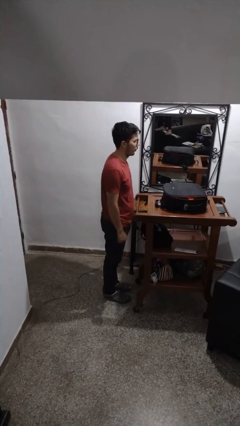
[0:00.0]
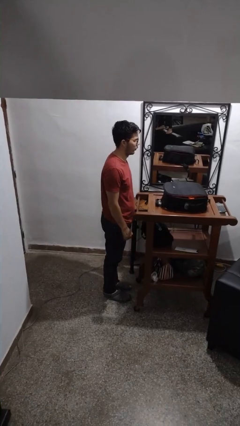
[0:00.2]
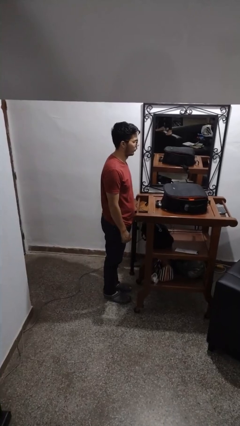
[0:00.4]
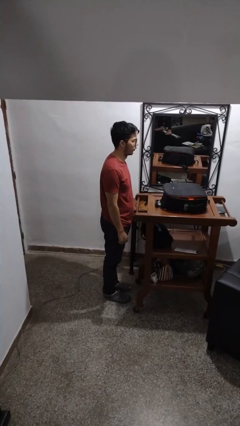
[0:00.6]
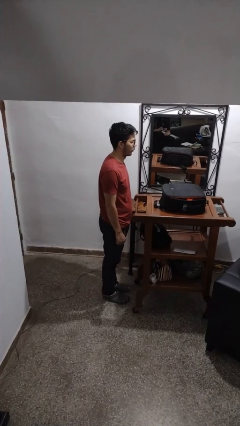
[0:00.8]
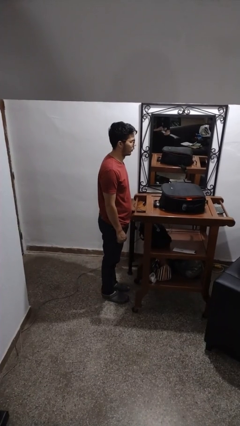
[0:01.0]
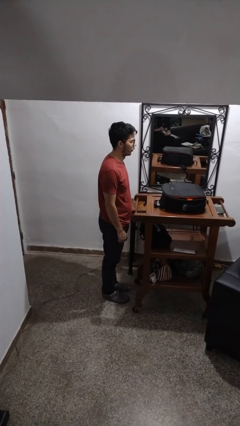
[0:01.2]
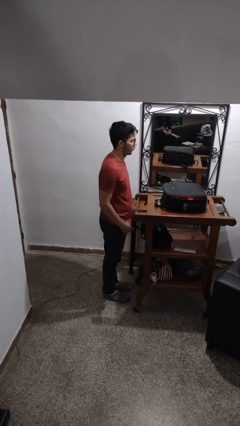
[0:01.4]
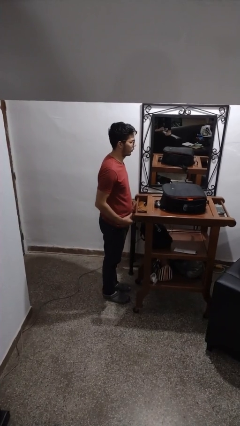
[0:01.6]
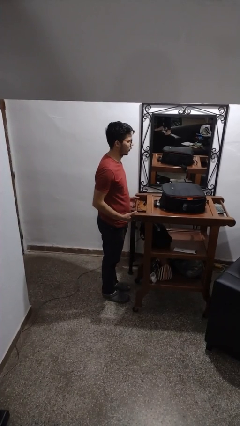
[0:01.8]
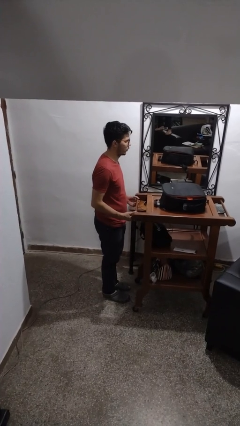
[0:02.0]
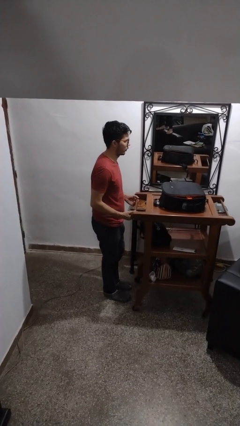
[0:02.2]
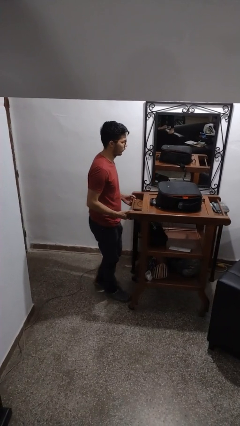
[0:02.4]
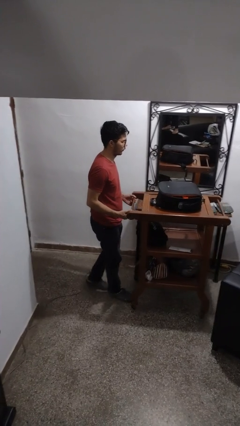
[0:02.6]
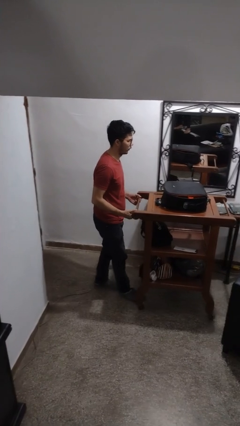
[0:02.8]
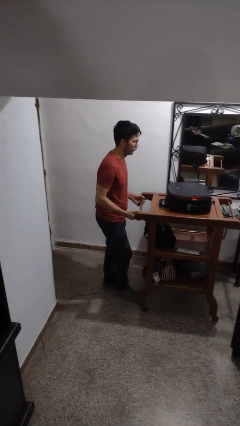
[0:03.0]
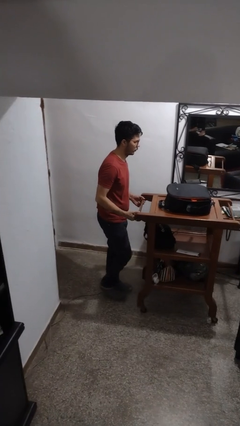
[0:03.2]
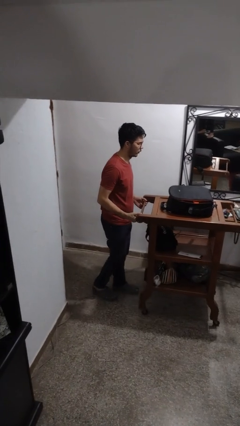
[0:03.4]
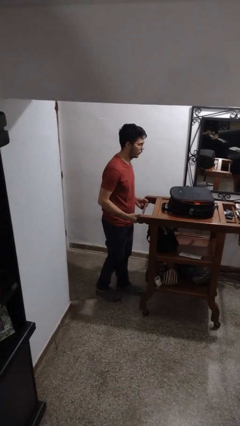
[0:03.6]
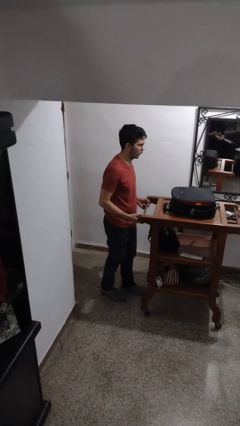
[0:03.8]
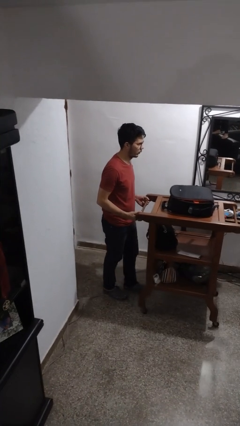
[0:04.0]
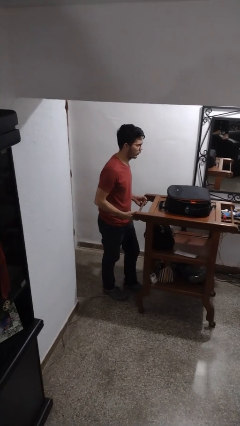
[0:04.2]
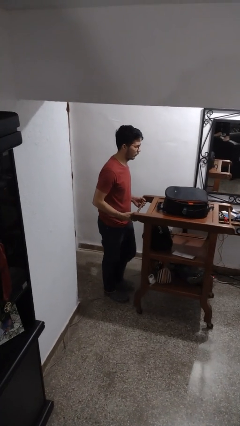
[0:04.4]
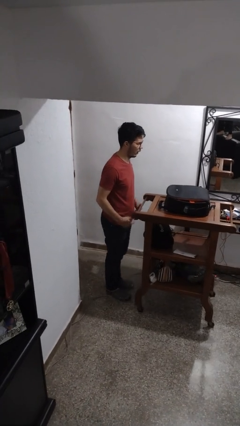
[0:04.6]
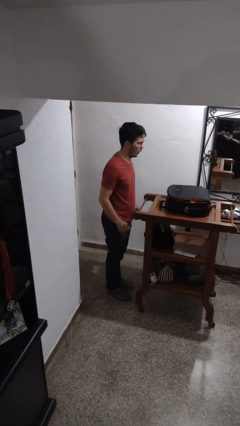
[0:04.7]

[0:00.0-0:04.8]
person pulls wheeled cart

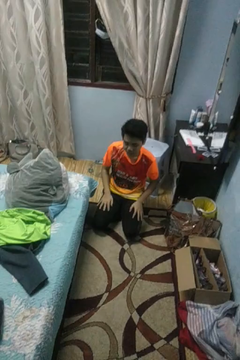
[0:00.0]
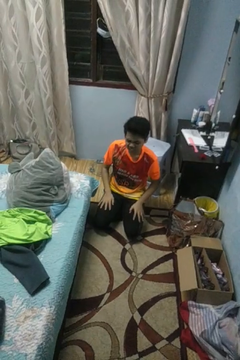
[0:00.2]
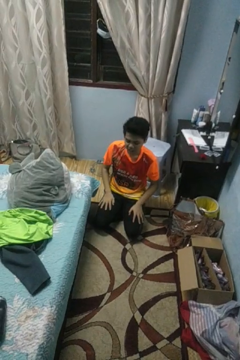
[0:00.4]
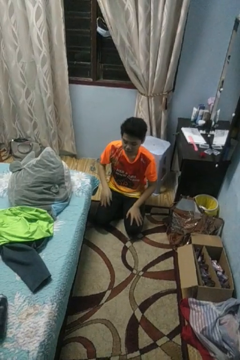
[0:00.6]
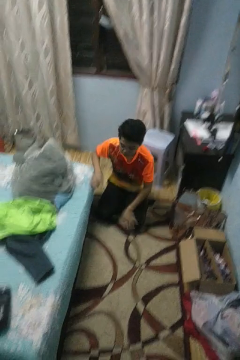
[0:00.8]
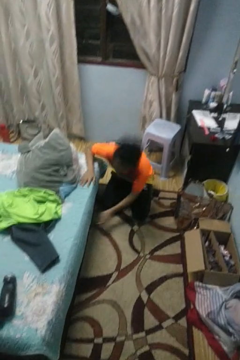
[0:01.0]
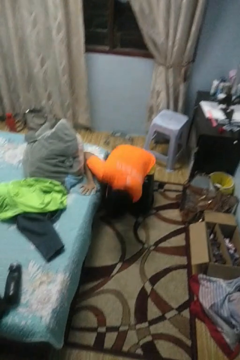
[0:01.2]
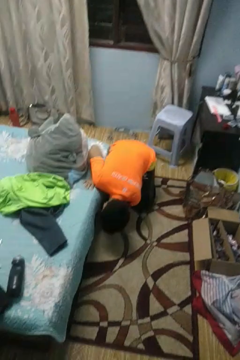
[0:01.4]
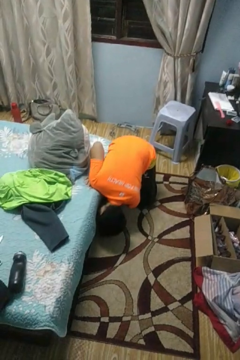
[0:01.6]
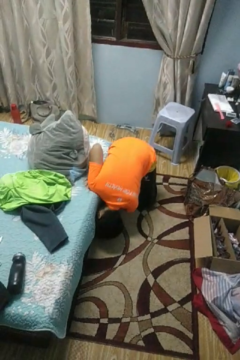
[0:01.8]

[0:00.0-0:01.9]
person searches under bed

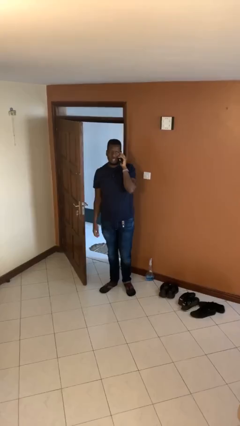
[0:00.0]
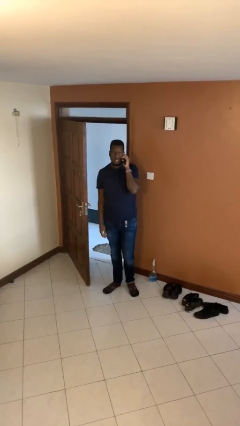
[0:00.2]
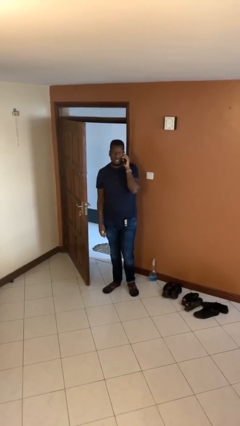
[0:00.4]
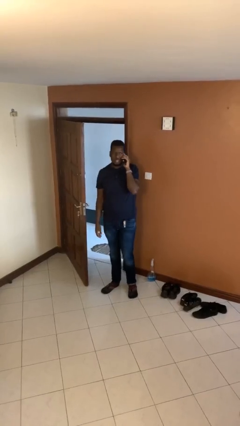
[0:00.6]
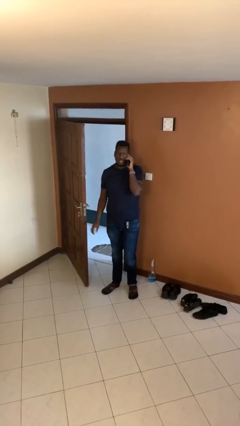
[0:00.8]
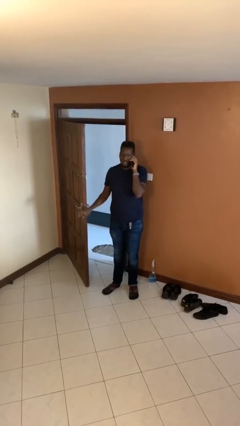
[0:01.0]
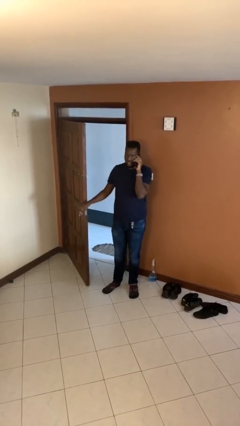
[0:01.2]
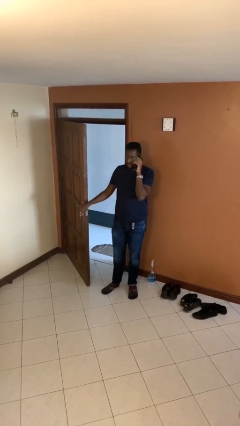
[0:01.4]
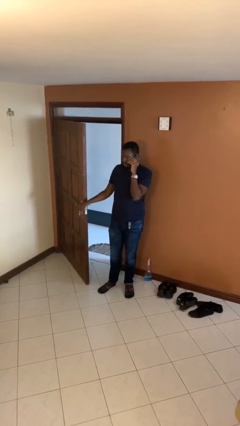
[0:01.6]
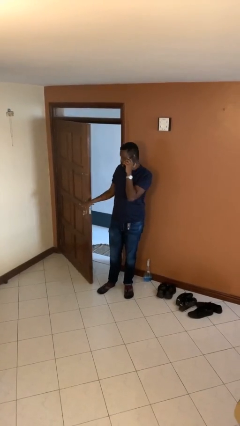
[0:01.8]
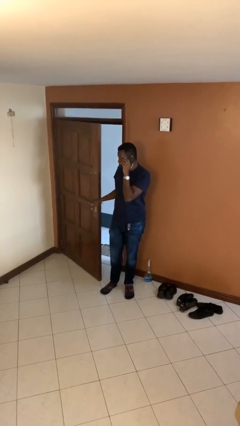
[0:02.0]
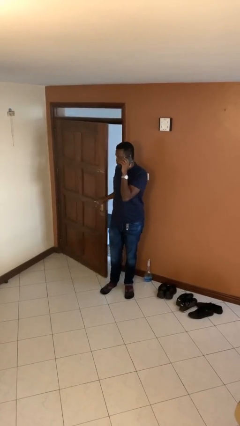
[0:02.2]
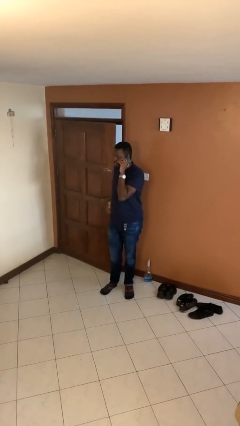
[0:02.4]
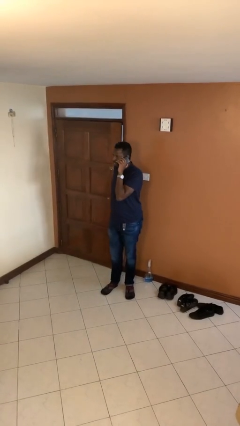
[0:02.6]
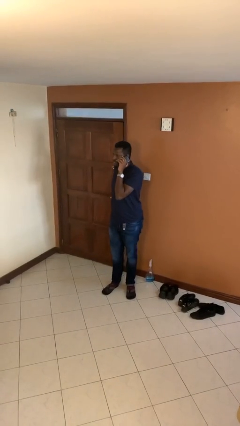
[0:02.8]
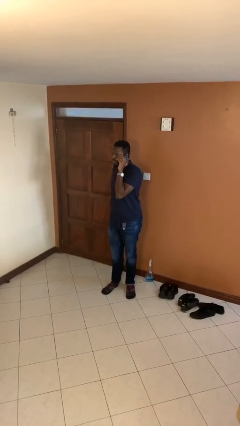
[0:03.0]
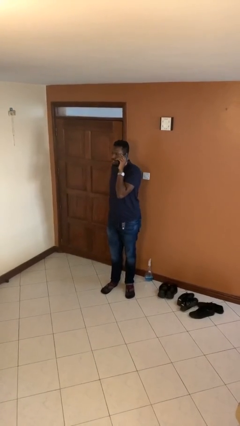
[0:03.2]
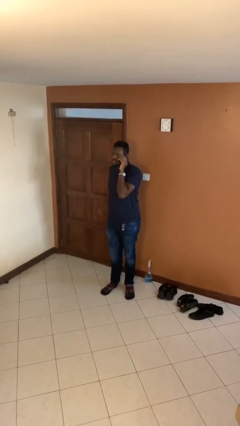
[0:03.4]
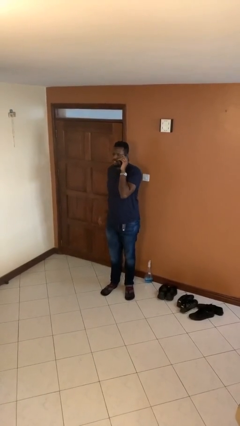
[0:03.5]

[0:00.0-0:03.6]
person closes facility door

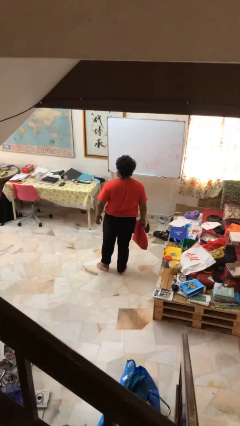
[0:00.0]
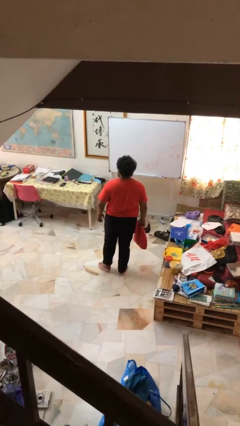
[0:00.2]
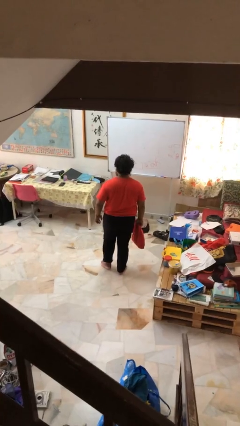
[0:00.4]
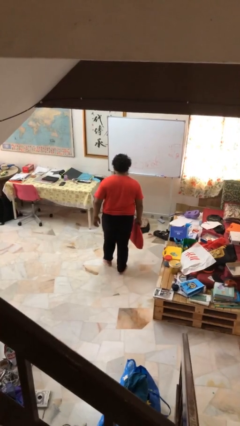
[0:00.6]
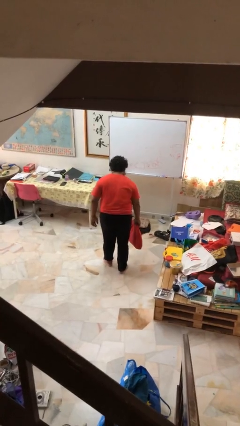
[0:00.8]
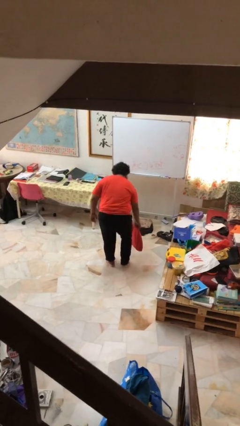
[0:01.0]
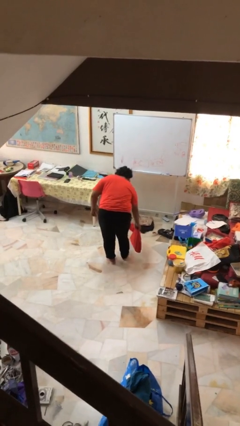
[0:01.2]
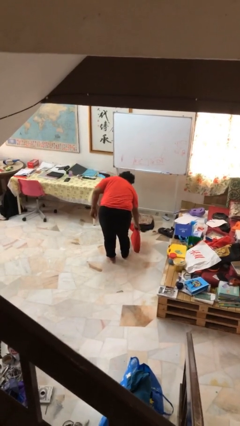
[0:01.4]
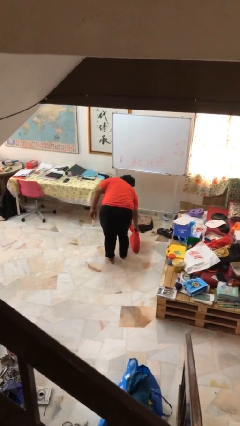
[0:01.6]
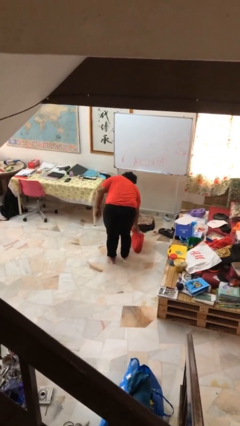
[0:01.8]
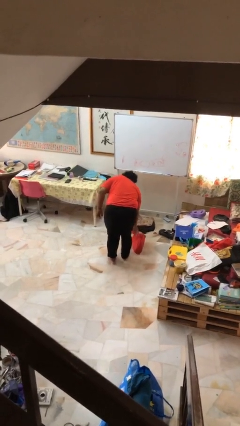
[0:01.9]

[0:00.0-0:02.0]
person puts down object on floor

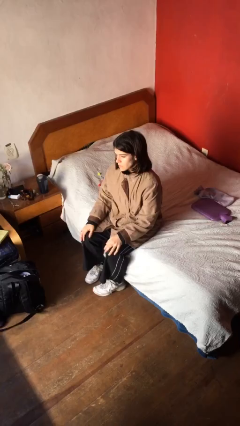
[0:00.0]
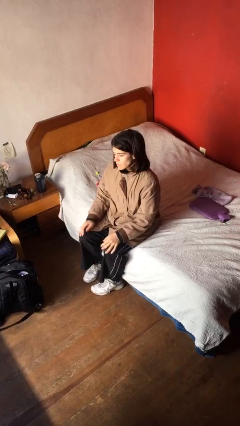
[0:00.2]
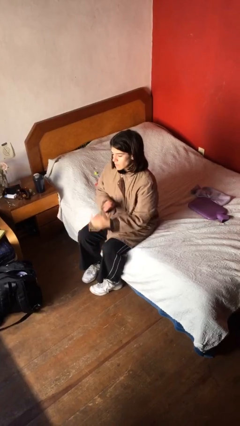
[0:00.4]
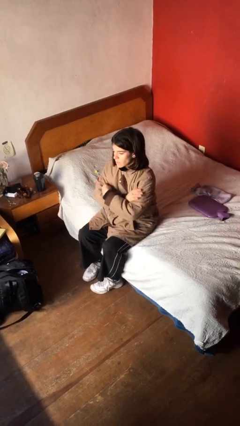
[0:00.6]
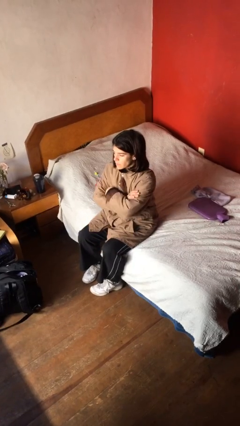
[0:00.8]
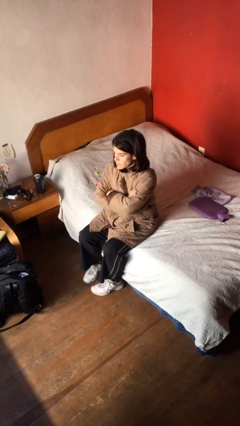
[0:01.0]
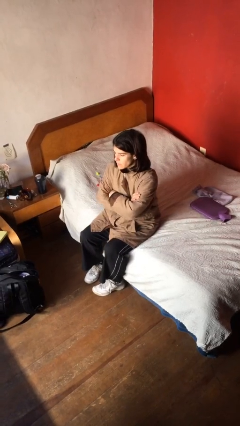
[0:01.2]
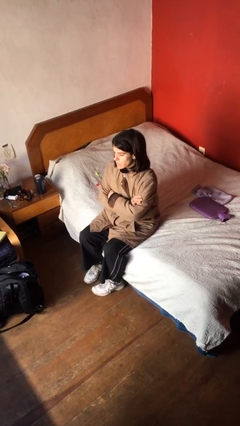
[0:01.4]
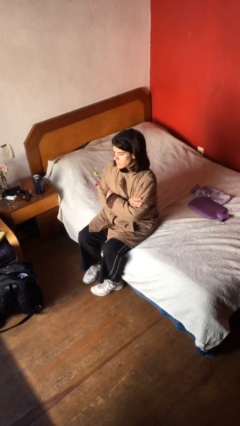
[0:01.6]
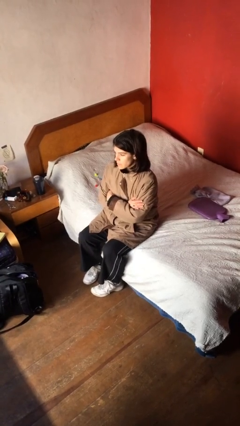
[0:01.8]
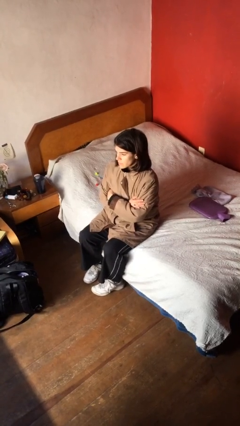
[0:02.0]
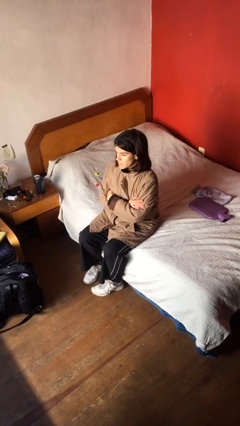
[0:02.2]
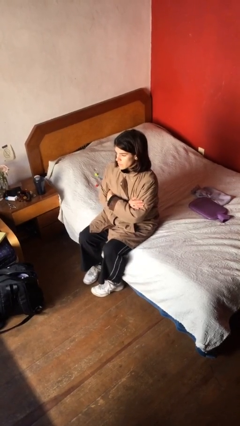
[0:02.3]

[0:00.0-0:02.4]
person crosses arms

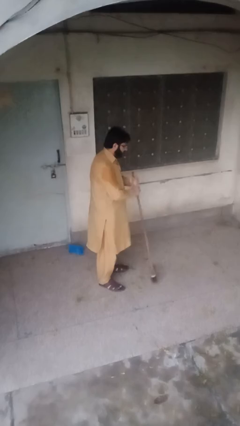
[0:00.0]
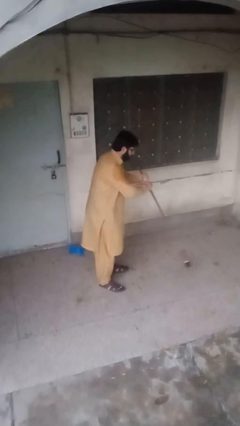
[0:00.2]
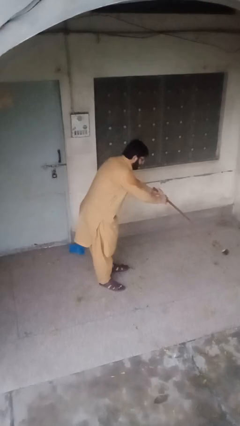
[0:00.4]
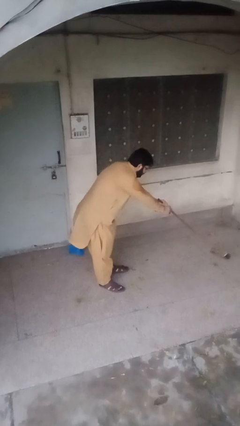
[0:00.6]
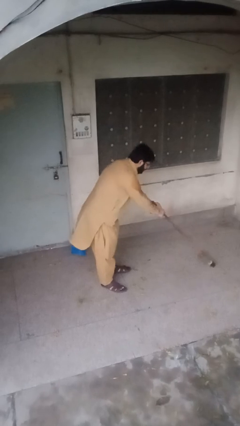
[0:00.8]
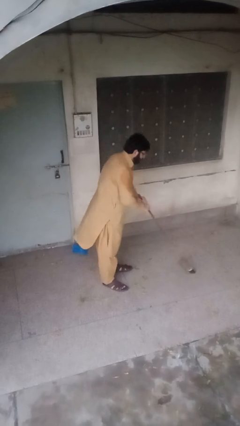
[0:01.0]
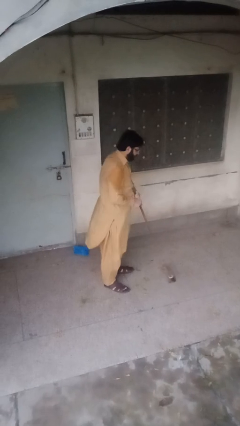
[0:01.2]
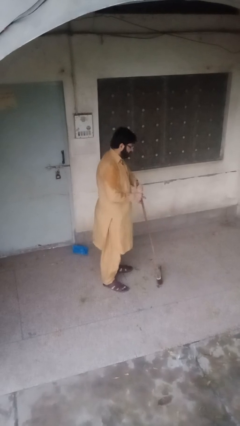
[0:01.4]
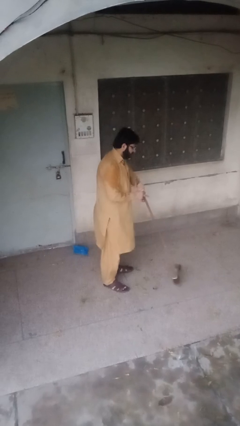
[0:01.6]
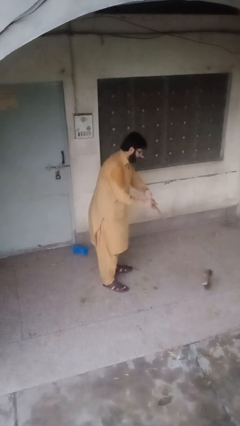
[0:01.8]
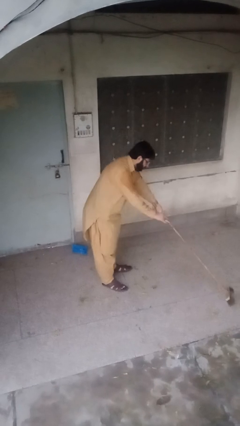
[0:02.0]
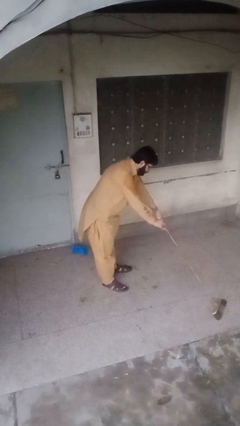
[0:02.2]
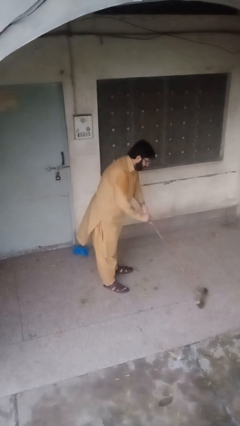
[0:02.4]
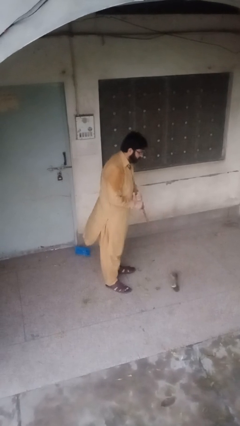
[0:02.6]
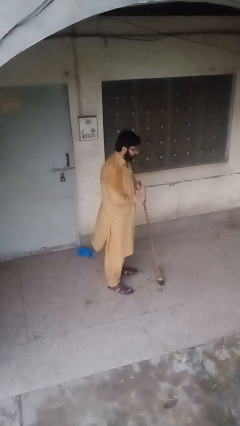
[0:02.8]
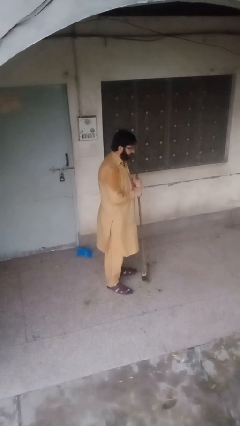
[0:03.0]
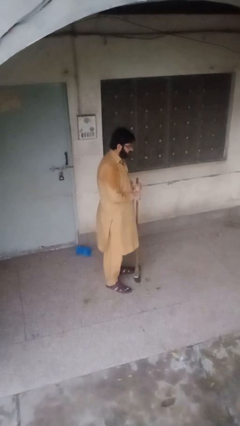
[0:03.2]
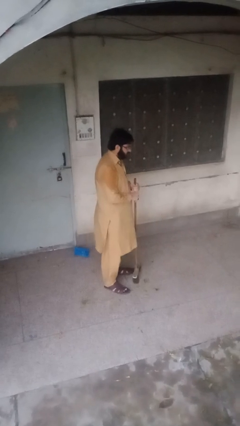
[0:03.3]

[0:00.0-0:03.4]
person sweeps floor
